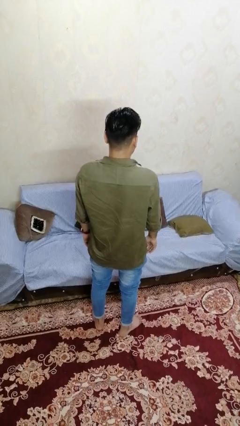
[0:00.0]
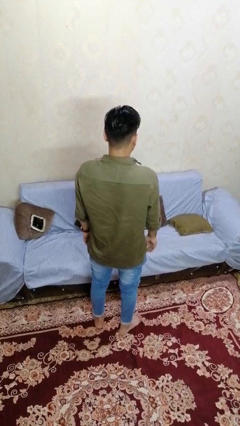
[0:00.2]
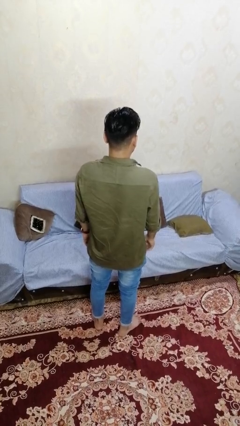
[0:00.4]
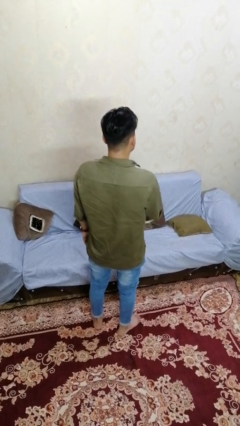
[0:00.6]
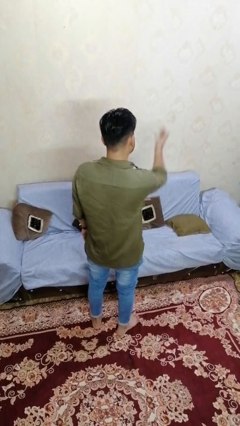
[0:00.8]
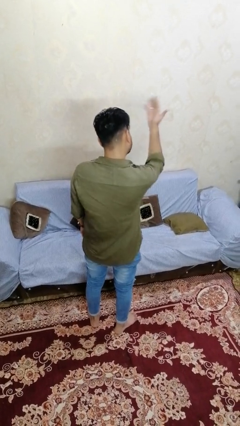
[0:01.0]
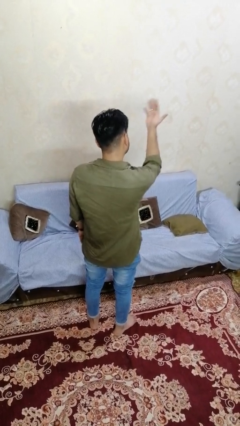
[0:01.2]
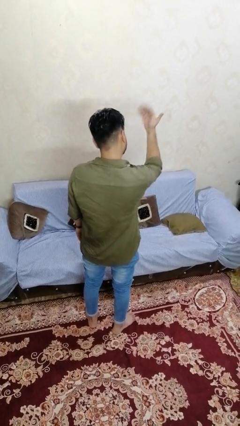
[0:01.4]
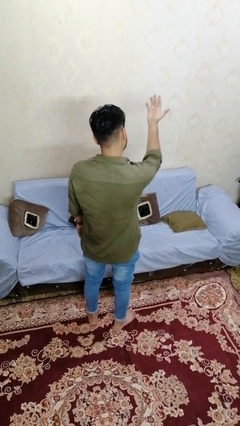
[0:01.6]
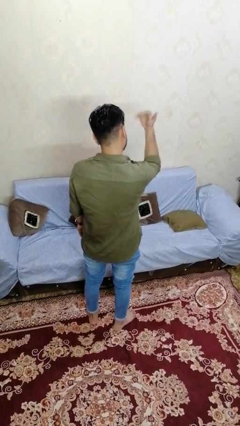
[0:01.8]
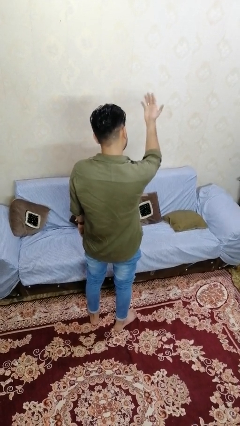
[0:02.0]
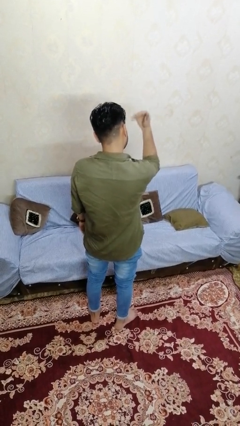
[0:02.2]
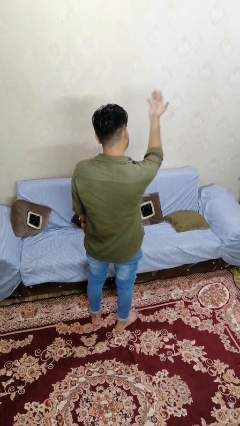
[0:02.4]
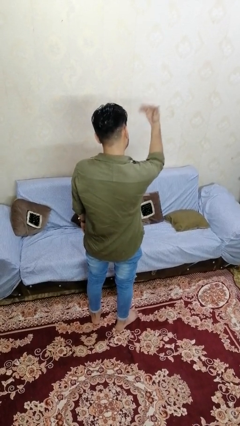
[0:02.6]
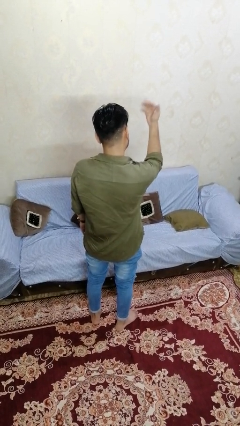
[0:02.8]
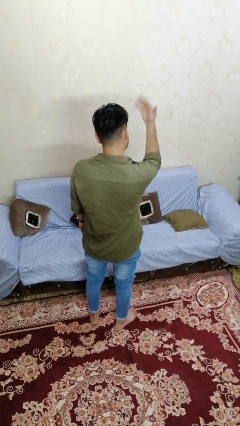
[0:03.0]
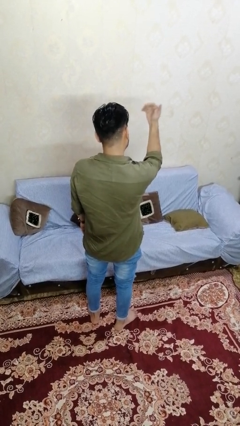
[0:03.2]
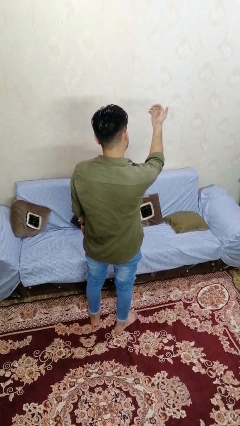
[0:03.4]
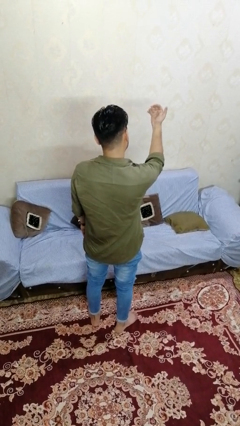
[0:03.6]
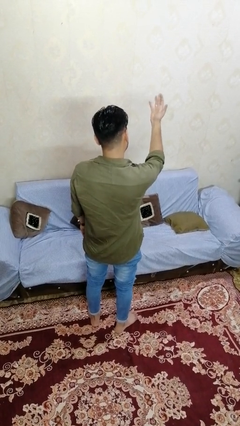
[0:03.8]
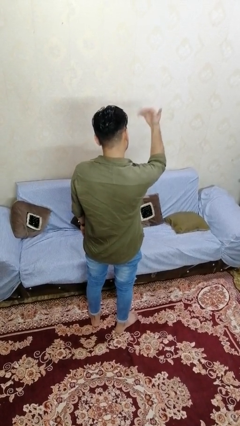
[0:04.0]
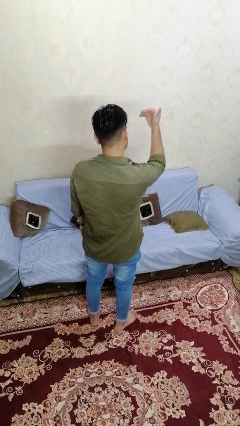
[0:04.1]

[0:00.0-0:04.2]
person gestures come here

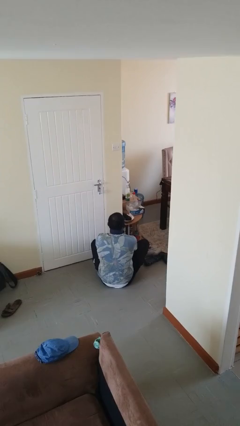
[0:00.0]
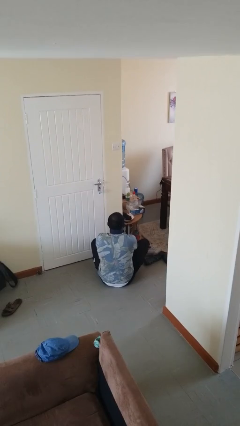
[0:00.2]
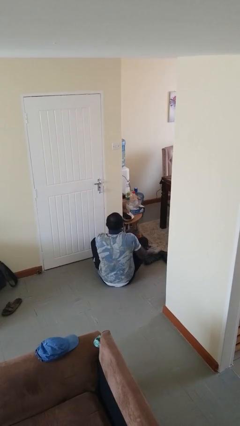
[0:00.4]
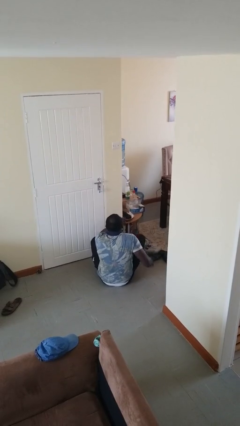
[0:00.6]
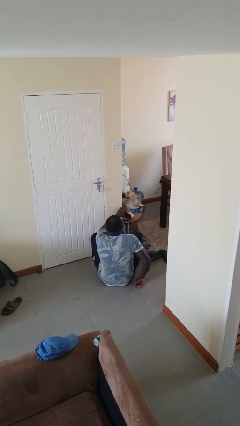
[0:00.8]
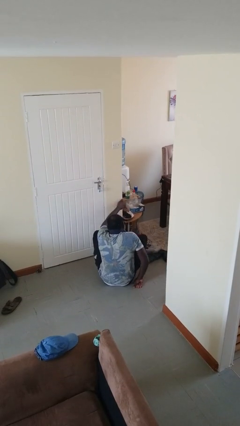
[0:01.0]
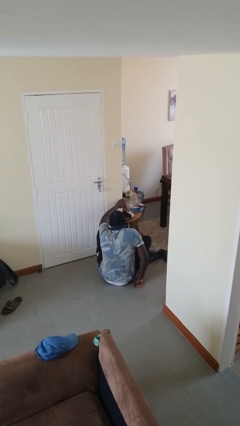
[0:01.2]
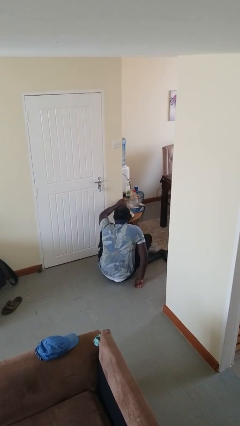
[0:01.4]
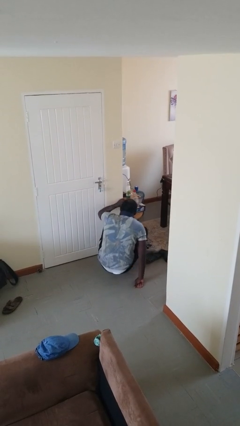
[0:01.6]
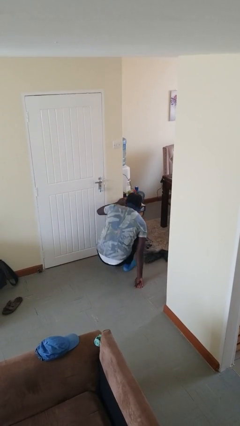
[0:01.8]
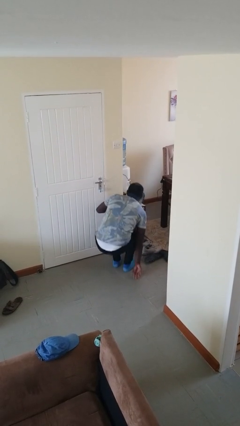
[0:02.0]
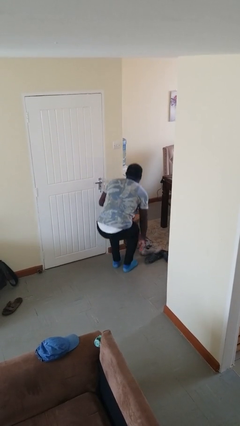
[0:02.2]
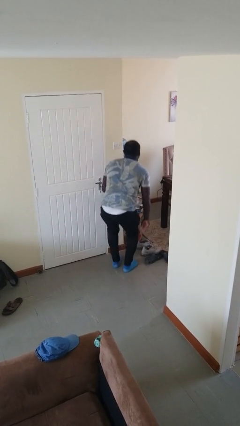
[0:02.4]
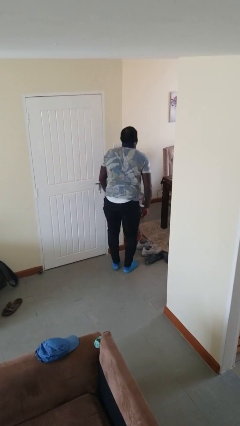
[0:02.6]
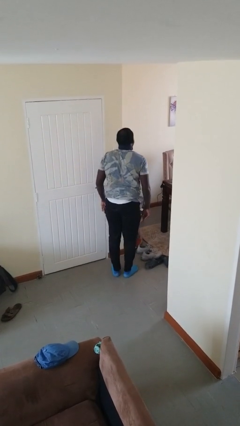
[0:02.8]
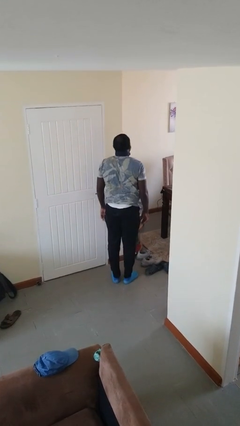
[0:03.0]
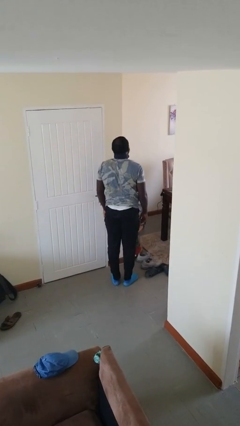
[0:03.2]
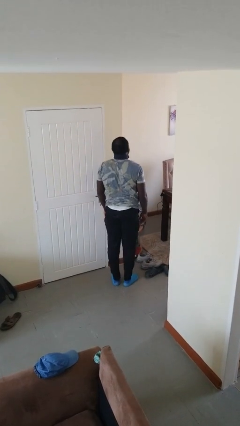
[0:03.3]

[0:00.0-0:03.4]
person stands up from floor

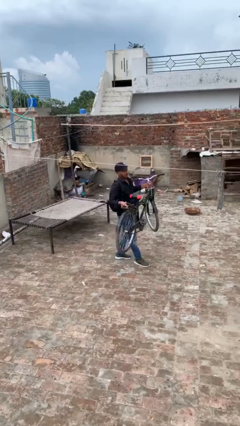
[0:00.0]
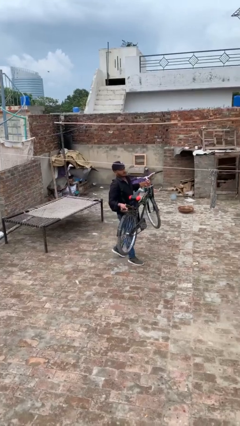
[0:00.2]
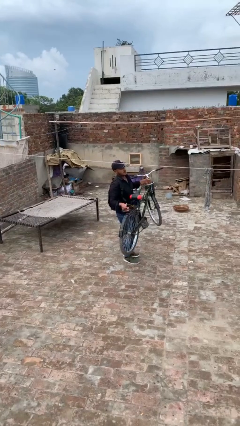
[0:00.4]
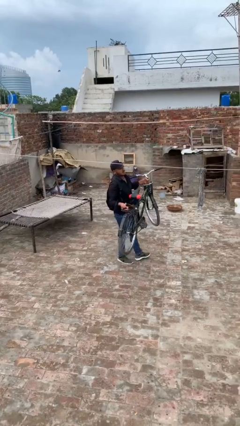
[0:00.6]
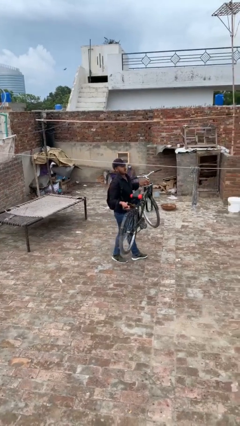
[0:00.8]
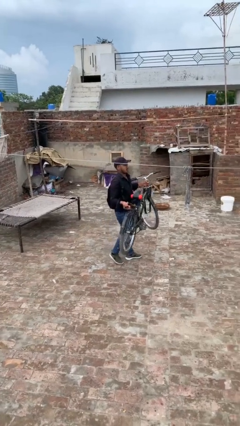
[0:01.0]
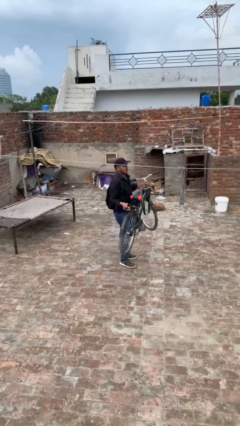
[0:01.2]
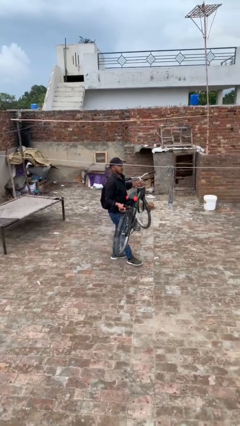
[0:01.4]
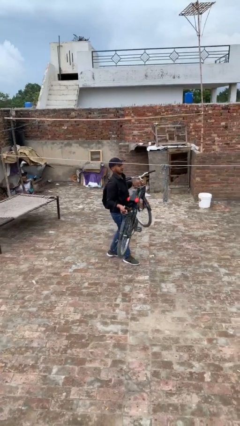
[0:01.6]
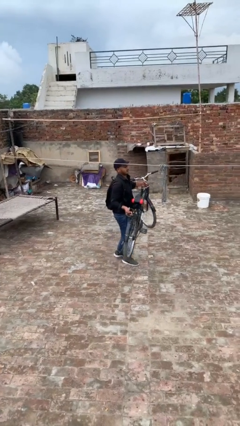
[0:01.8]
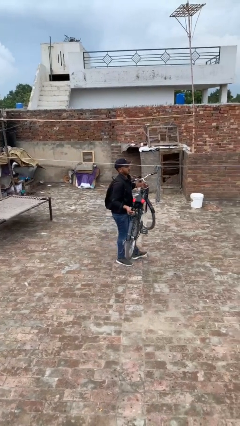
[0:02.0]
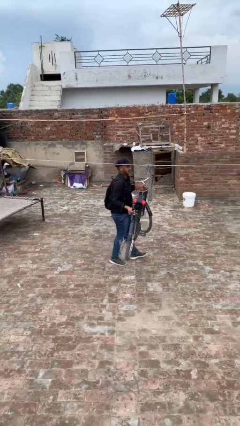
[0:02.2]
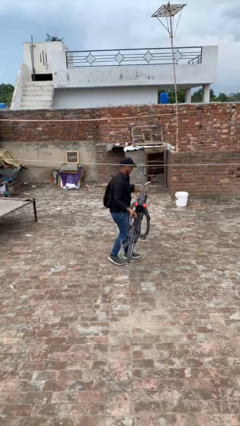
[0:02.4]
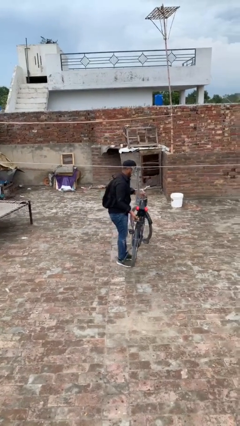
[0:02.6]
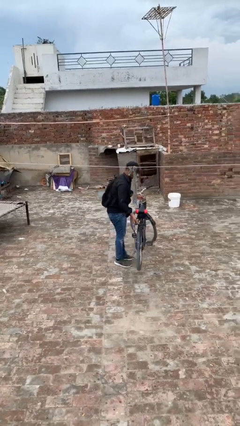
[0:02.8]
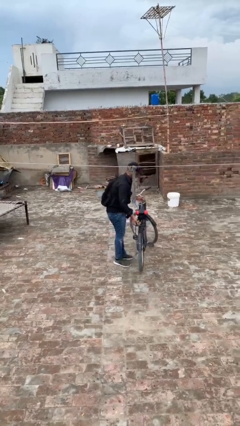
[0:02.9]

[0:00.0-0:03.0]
person carries heavy object

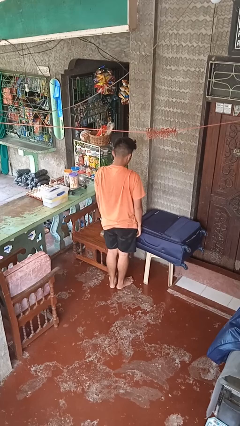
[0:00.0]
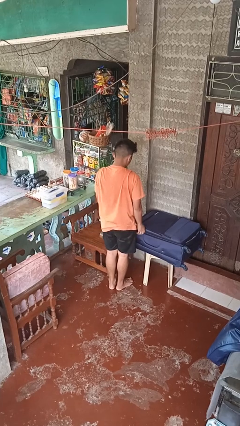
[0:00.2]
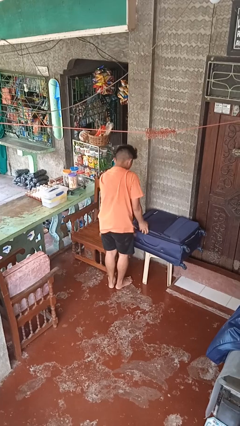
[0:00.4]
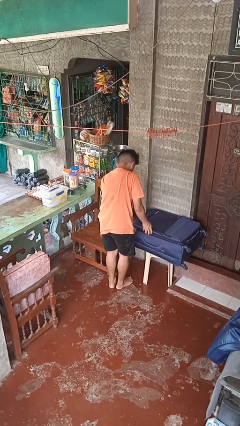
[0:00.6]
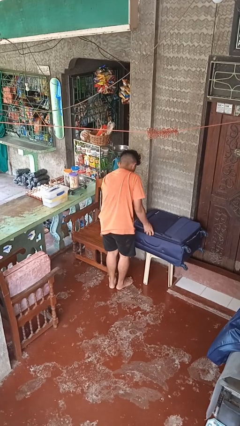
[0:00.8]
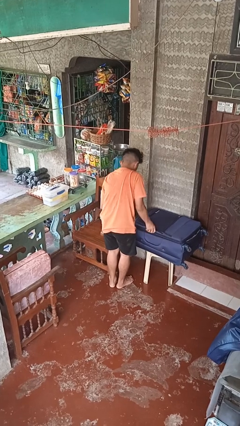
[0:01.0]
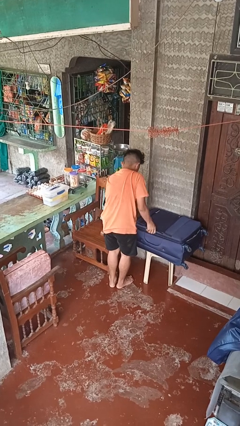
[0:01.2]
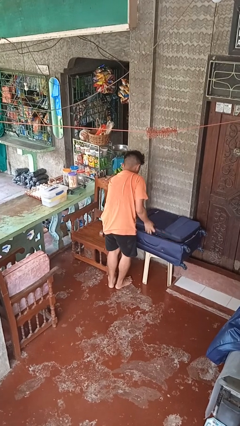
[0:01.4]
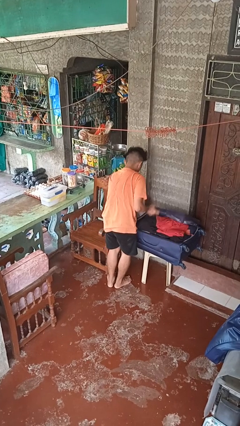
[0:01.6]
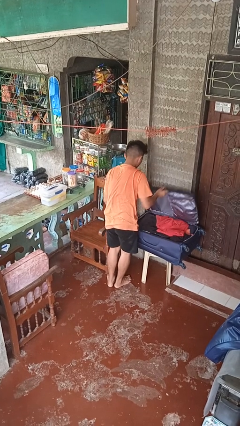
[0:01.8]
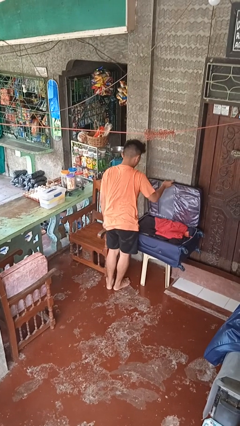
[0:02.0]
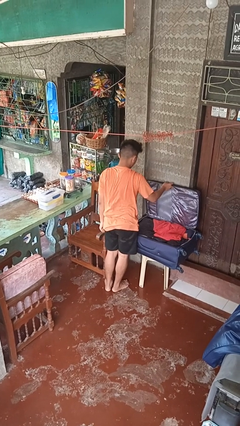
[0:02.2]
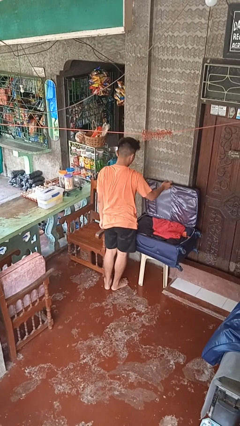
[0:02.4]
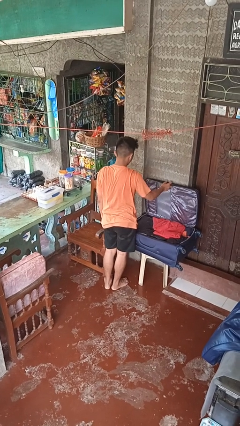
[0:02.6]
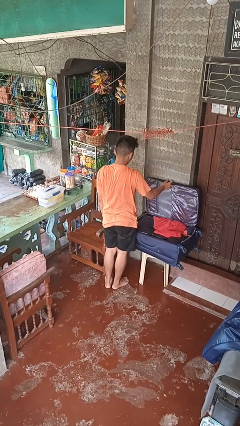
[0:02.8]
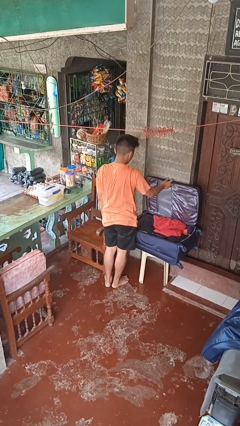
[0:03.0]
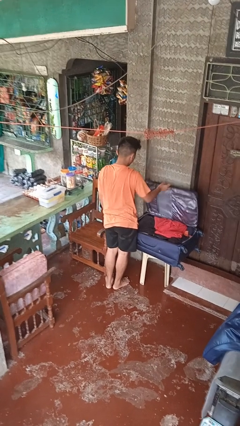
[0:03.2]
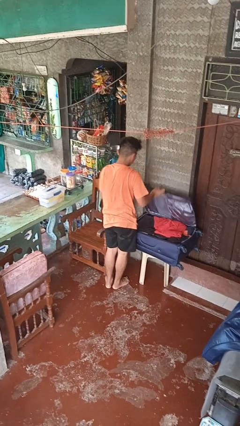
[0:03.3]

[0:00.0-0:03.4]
person opens suitcase

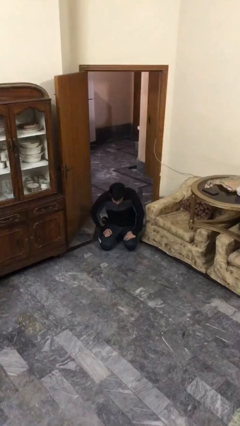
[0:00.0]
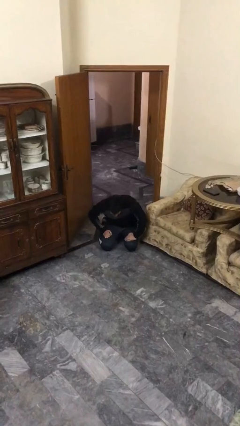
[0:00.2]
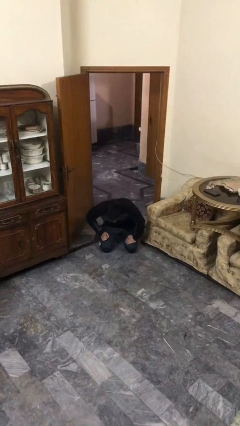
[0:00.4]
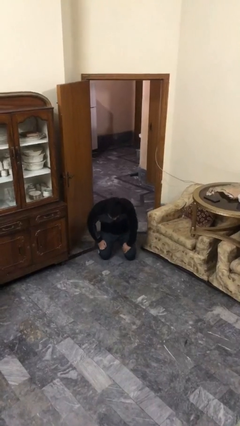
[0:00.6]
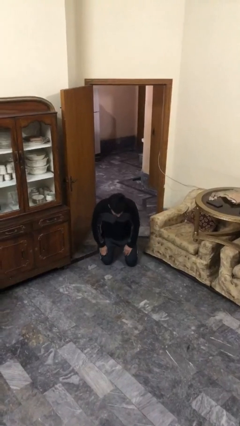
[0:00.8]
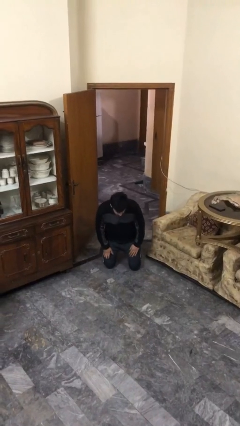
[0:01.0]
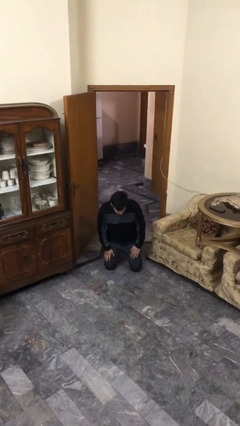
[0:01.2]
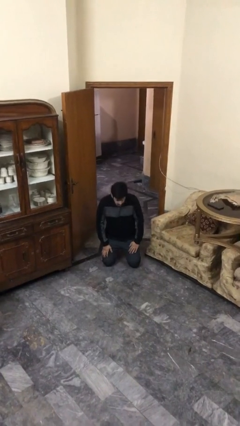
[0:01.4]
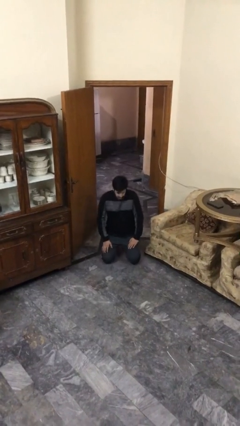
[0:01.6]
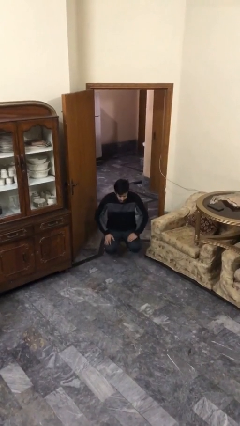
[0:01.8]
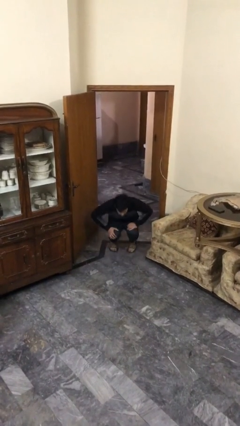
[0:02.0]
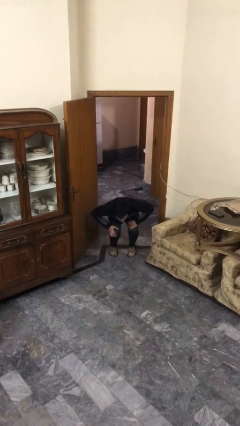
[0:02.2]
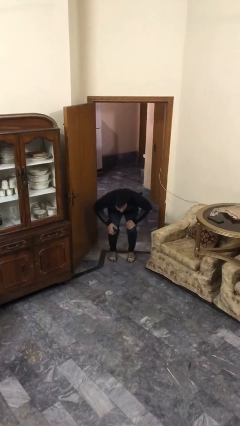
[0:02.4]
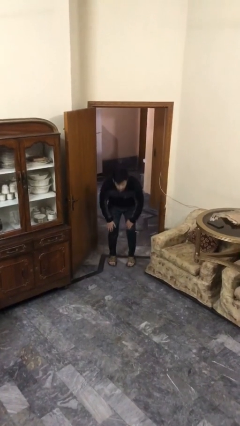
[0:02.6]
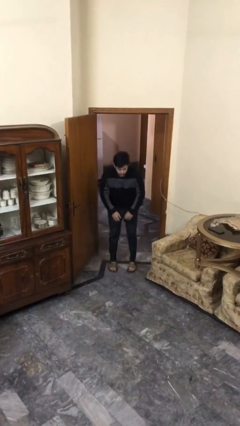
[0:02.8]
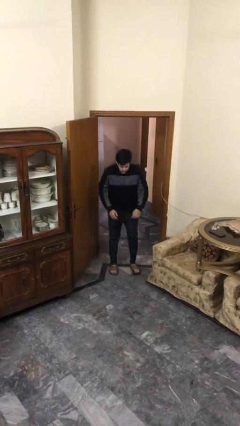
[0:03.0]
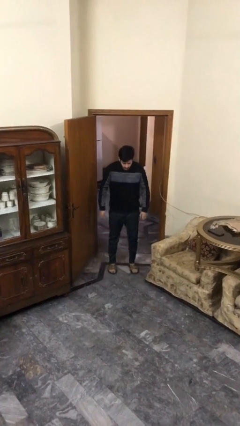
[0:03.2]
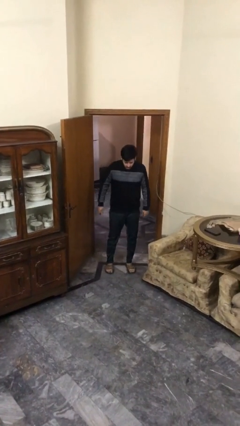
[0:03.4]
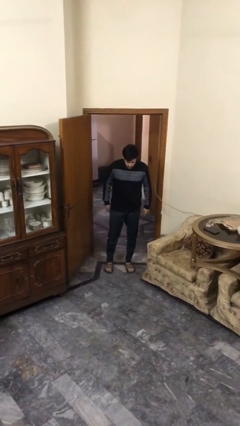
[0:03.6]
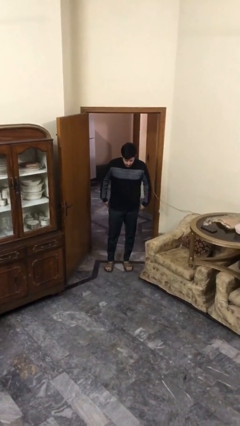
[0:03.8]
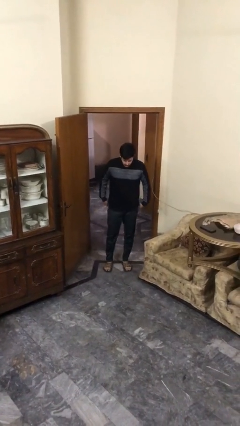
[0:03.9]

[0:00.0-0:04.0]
person stands up
